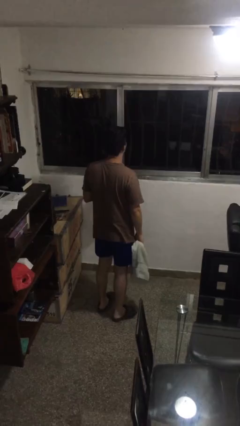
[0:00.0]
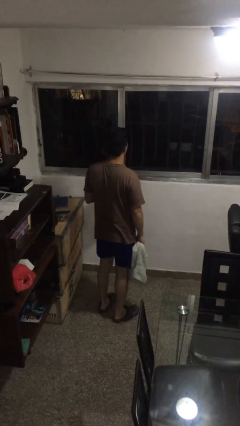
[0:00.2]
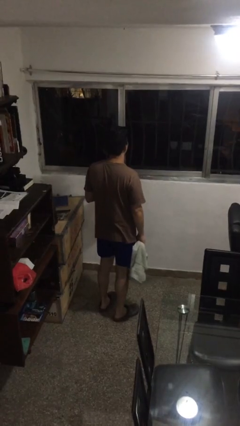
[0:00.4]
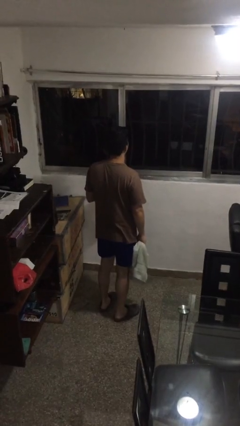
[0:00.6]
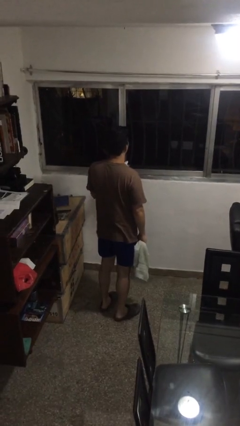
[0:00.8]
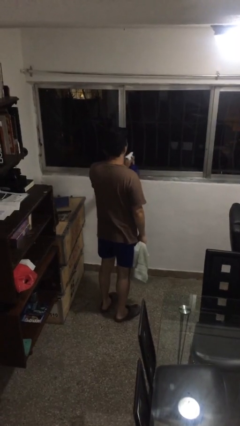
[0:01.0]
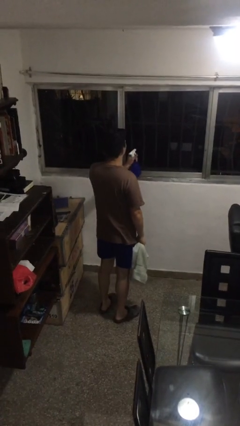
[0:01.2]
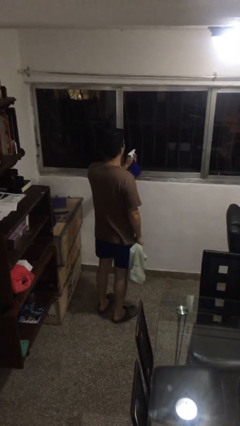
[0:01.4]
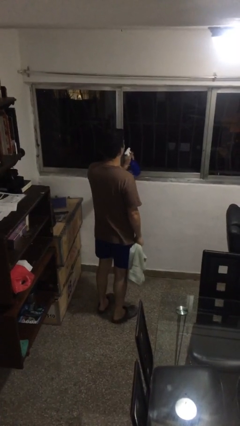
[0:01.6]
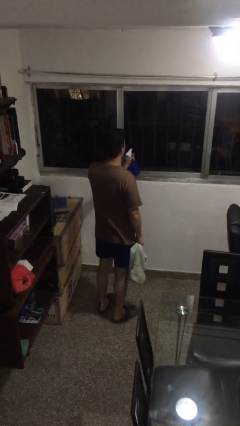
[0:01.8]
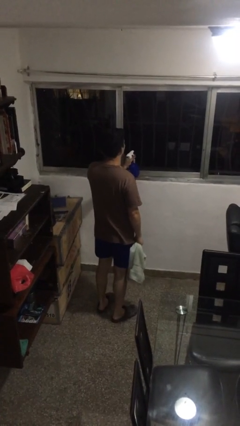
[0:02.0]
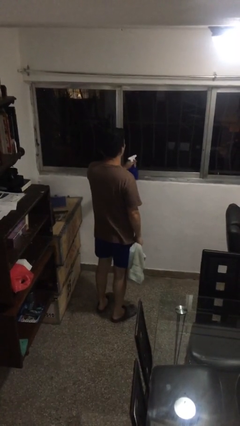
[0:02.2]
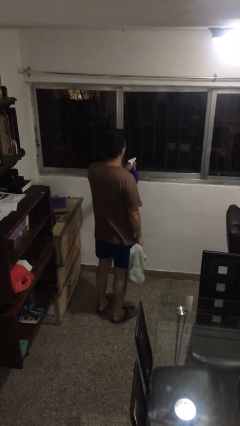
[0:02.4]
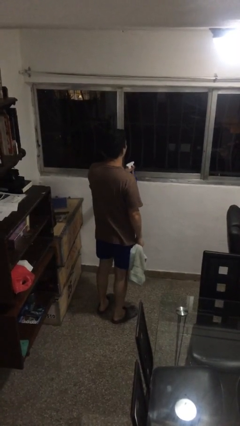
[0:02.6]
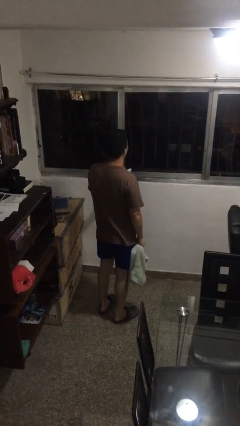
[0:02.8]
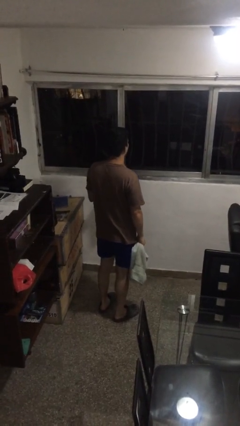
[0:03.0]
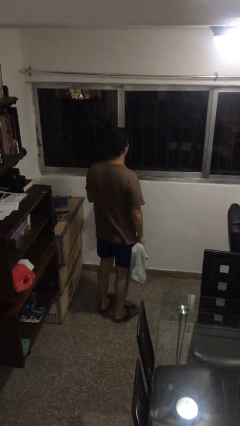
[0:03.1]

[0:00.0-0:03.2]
person sprays from bottle

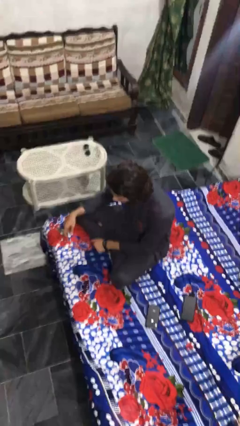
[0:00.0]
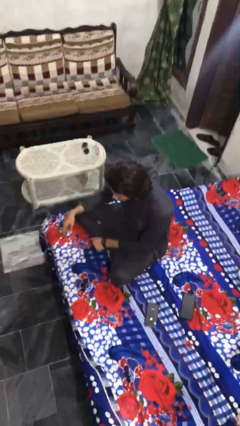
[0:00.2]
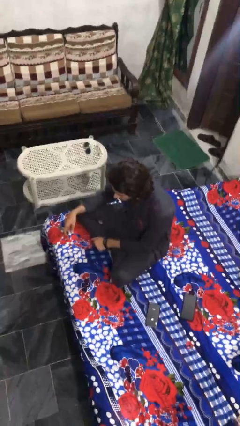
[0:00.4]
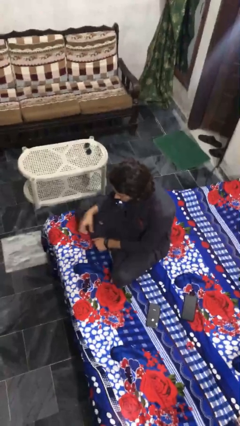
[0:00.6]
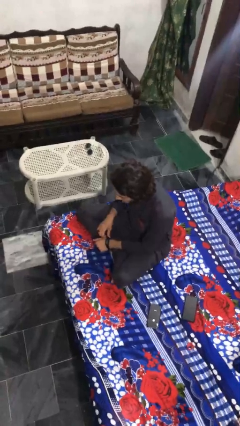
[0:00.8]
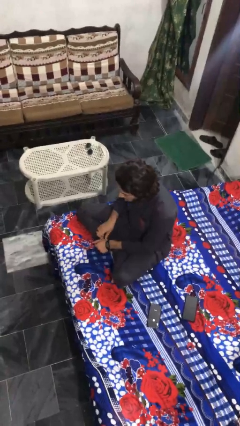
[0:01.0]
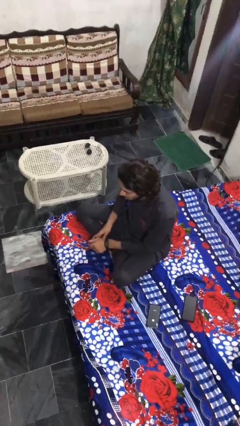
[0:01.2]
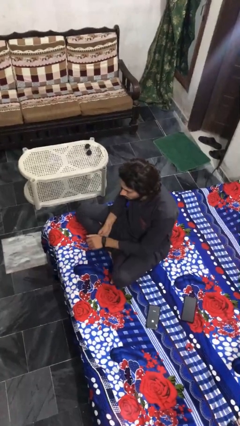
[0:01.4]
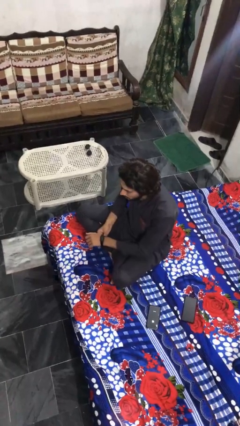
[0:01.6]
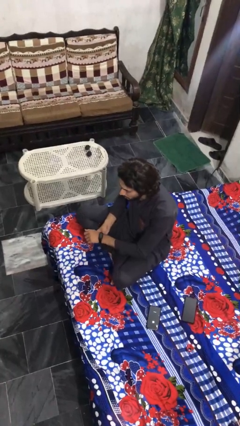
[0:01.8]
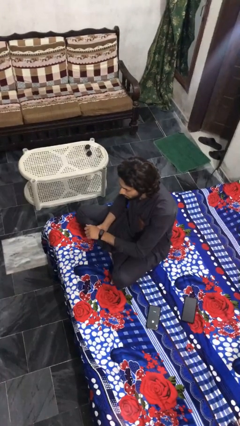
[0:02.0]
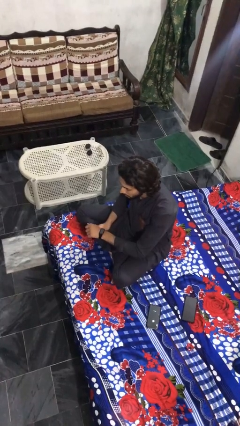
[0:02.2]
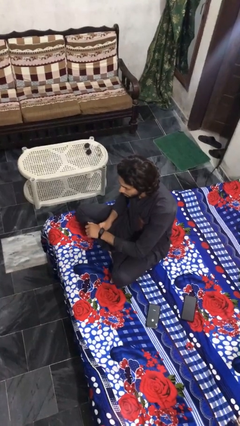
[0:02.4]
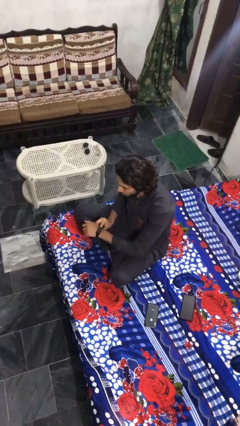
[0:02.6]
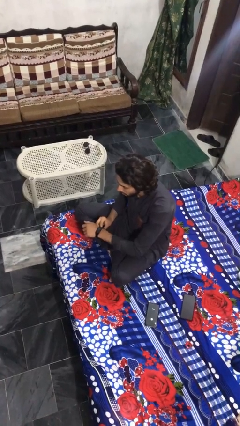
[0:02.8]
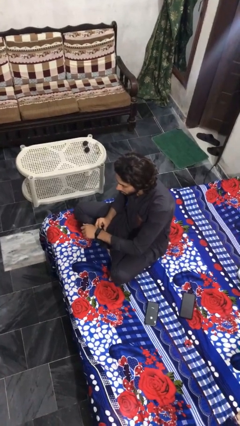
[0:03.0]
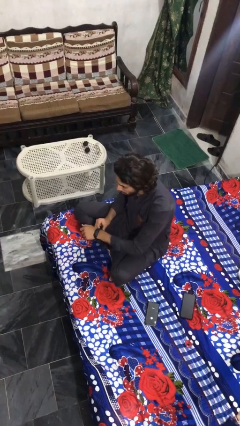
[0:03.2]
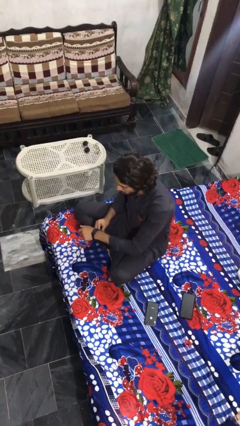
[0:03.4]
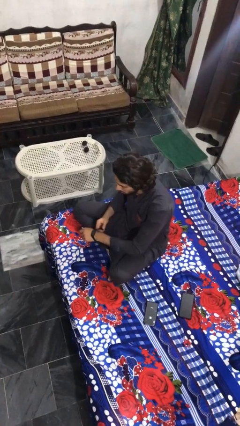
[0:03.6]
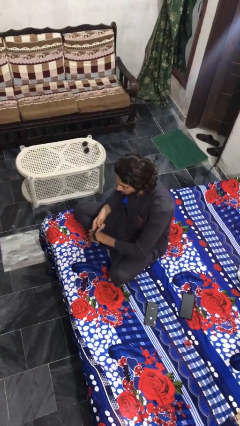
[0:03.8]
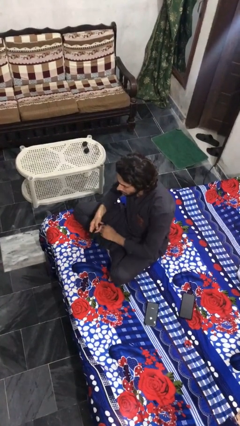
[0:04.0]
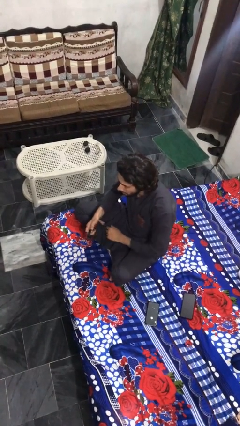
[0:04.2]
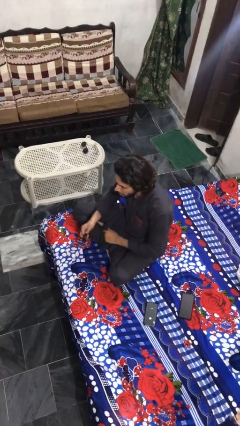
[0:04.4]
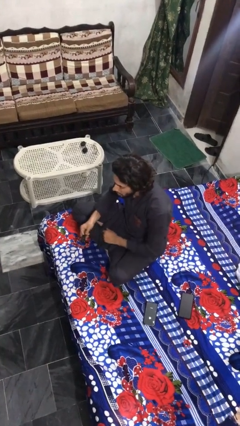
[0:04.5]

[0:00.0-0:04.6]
person takes off wristwatch

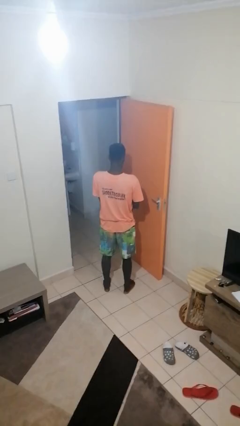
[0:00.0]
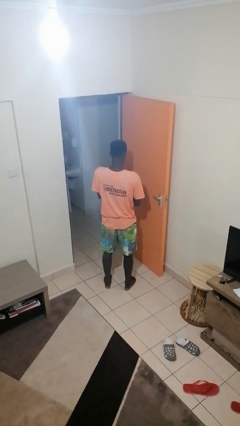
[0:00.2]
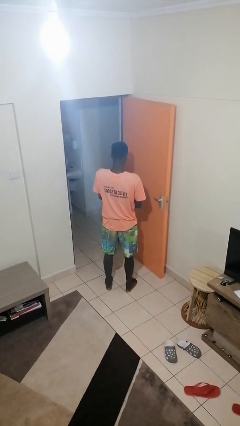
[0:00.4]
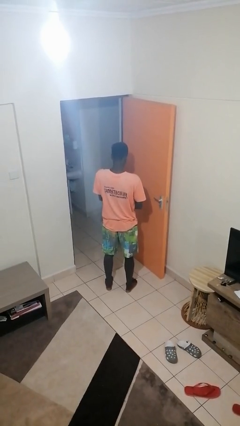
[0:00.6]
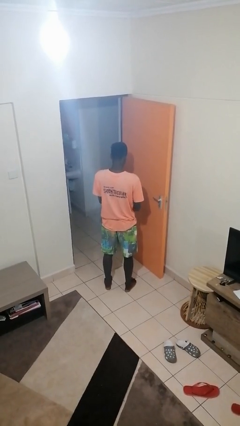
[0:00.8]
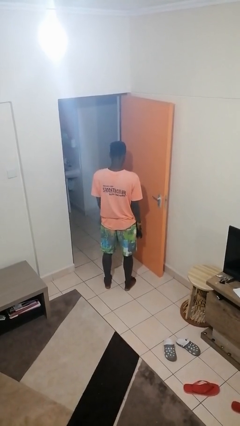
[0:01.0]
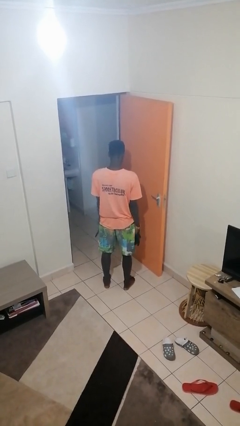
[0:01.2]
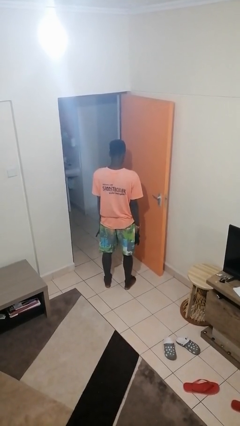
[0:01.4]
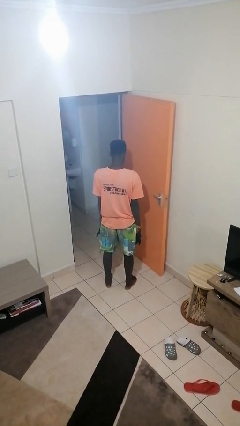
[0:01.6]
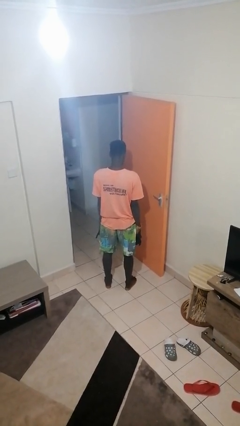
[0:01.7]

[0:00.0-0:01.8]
person puts on gloves

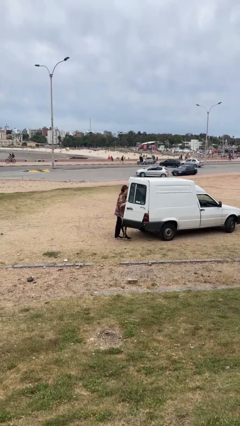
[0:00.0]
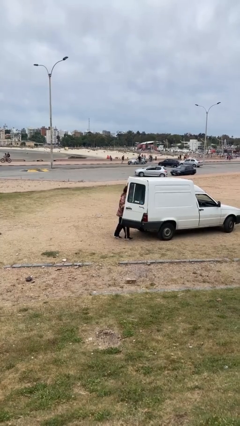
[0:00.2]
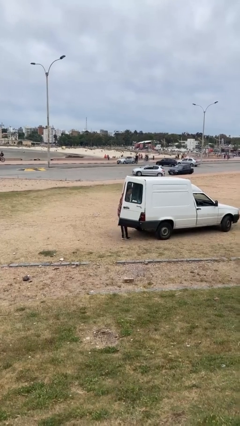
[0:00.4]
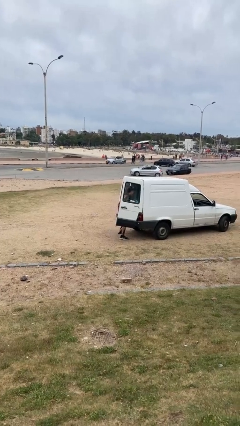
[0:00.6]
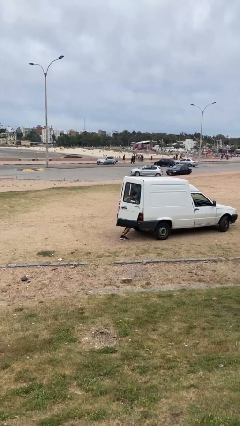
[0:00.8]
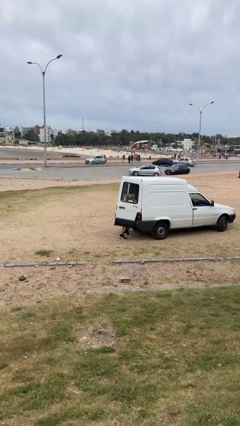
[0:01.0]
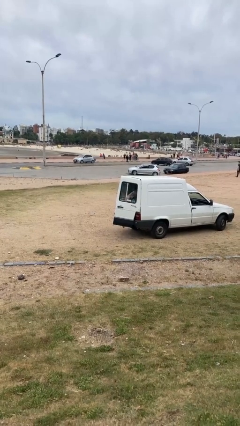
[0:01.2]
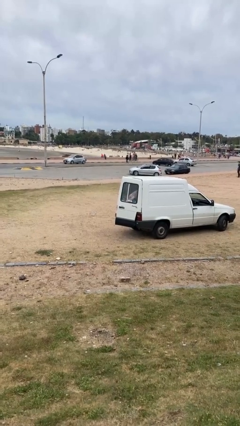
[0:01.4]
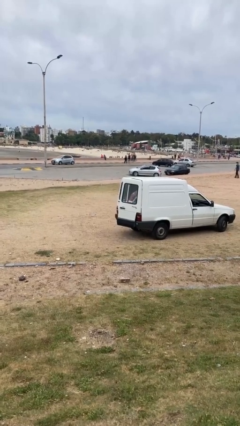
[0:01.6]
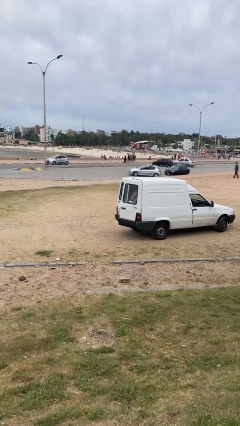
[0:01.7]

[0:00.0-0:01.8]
person enters car

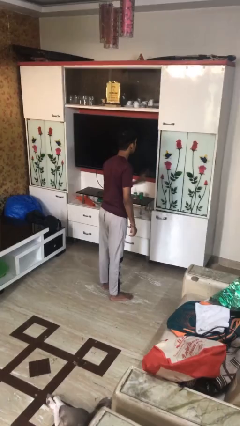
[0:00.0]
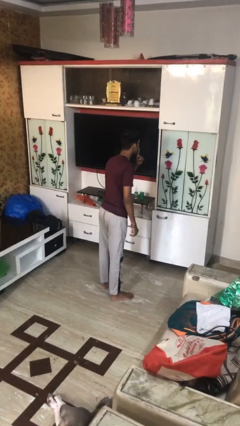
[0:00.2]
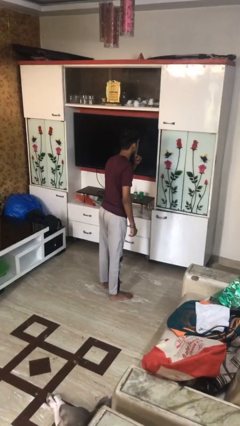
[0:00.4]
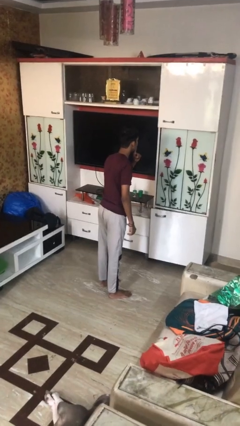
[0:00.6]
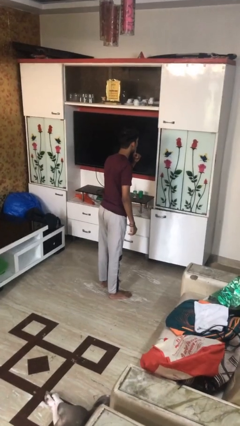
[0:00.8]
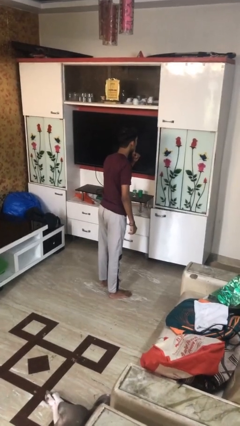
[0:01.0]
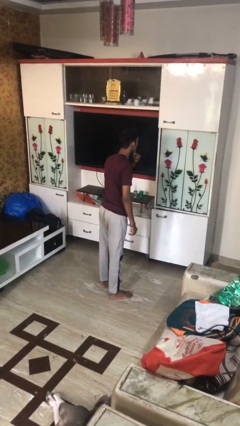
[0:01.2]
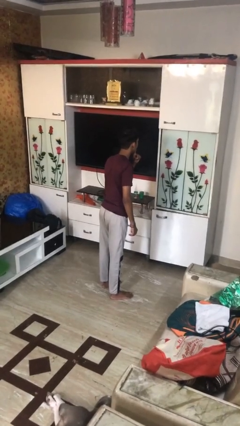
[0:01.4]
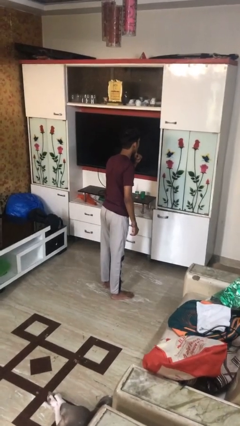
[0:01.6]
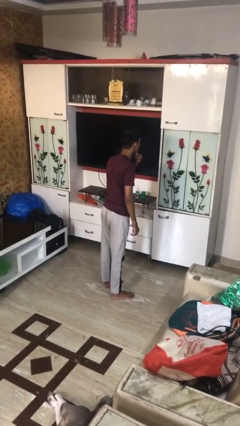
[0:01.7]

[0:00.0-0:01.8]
person gestures be quiet

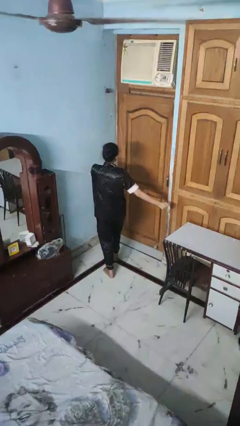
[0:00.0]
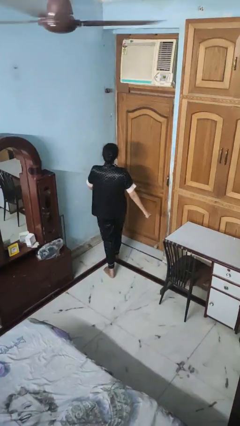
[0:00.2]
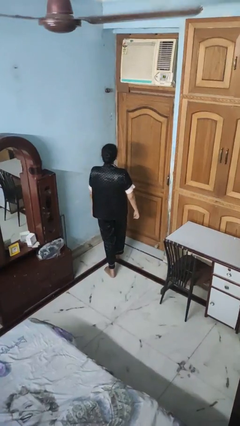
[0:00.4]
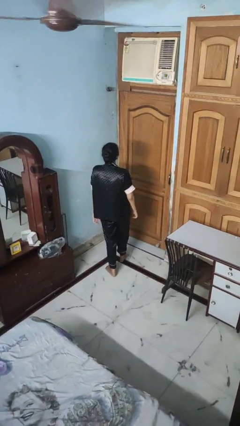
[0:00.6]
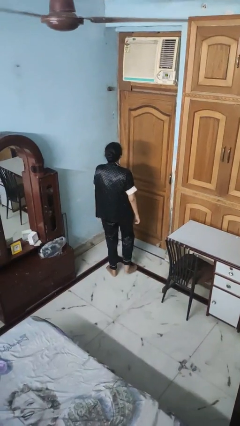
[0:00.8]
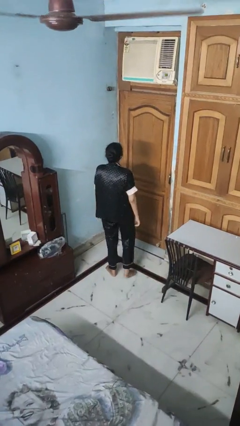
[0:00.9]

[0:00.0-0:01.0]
person dances in place

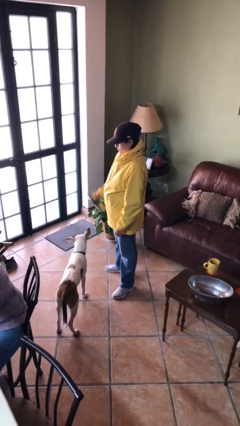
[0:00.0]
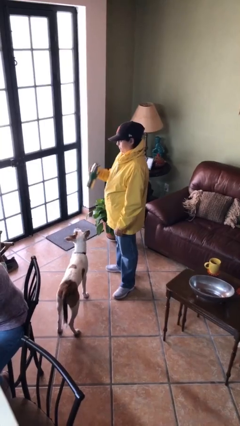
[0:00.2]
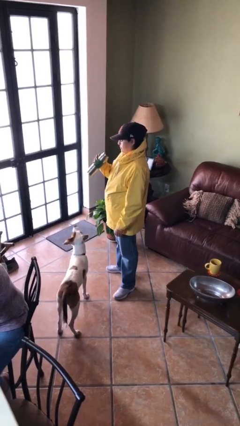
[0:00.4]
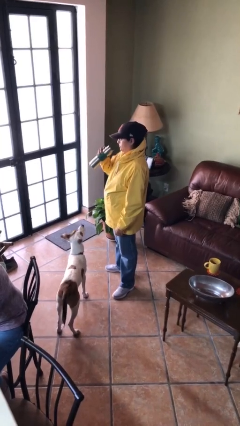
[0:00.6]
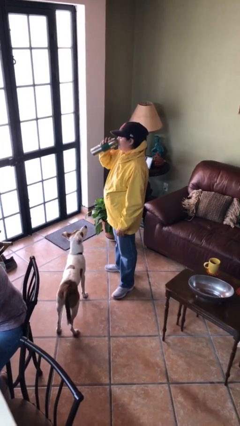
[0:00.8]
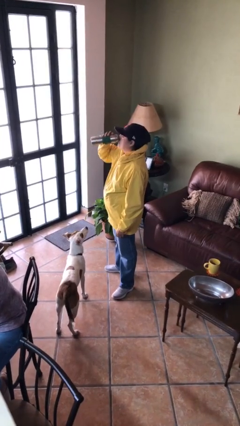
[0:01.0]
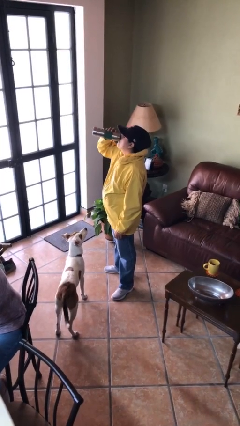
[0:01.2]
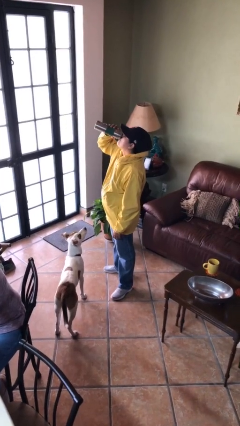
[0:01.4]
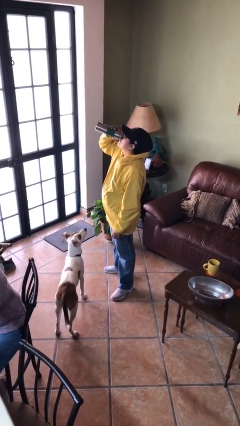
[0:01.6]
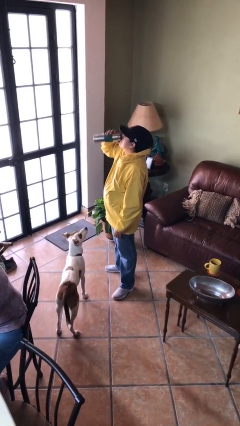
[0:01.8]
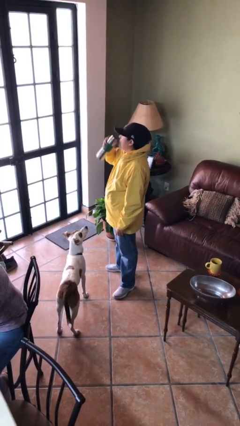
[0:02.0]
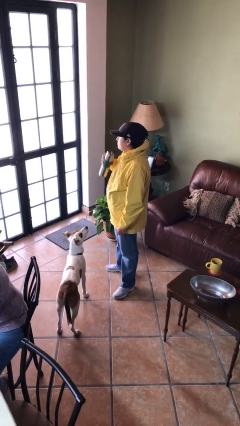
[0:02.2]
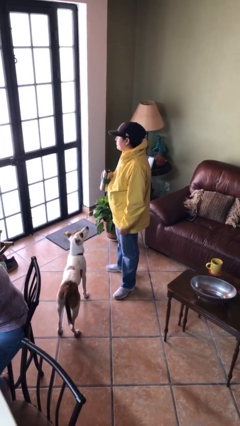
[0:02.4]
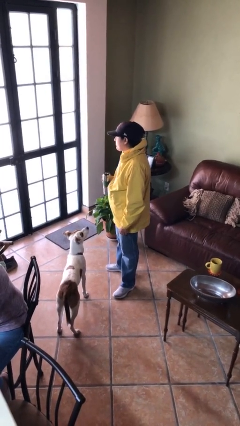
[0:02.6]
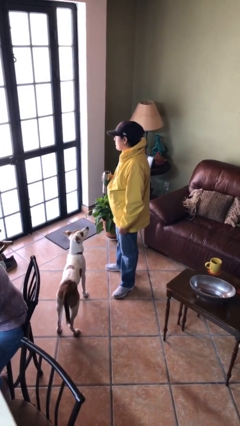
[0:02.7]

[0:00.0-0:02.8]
person drinks from bottle
